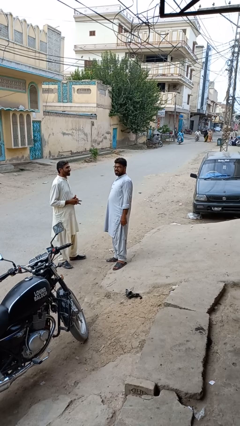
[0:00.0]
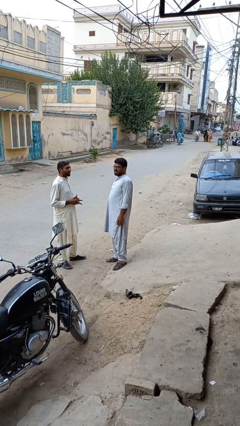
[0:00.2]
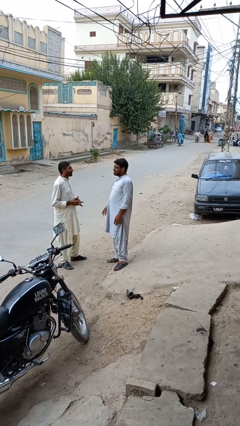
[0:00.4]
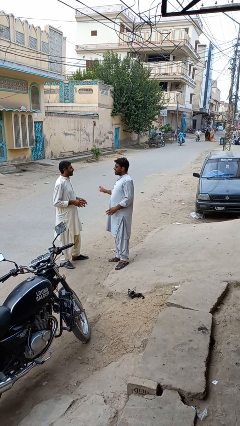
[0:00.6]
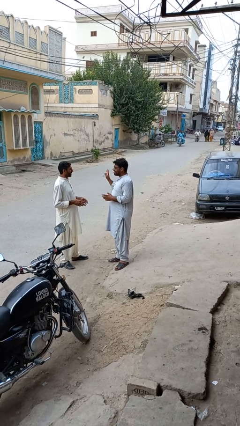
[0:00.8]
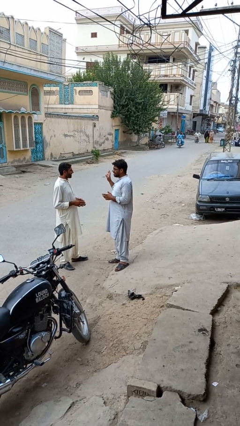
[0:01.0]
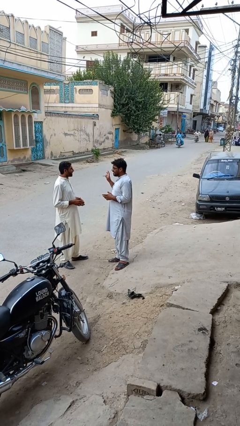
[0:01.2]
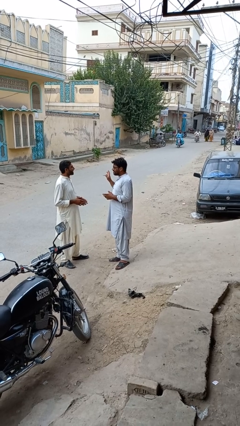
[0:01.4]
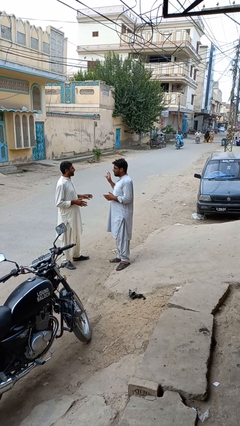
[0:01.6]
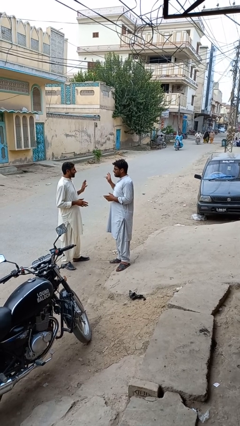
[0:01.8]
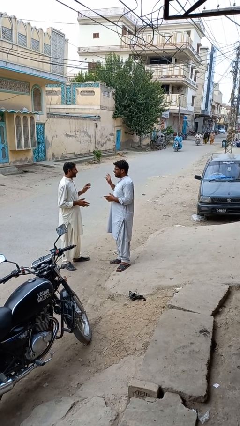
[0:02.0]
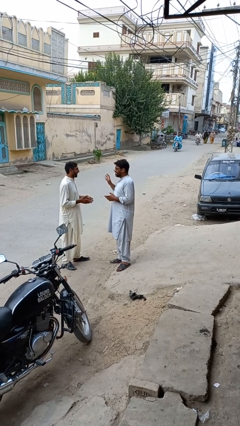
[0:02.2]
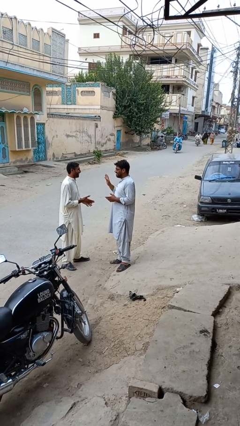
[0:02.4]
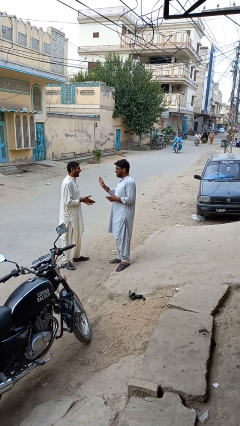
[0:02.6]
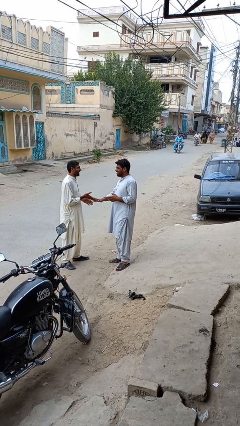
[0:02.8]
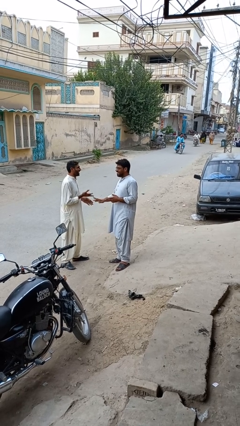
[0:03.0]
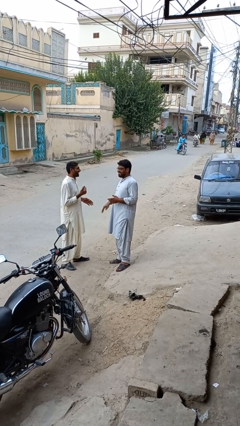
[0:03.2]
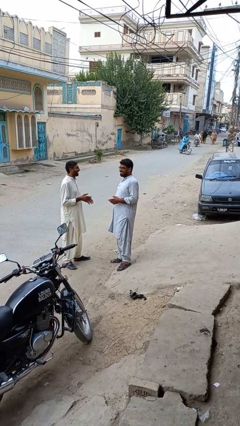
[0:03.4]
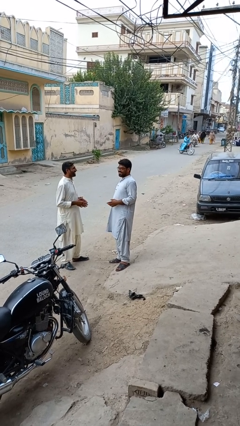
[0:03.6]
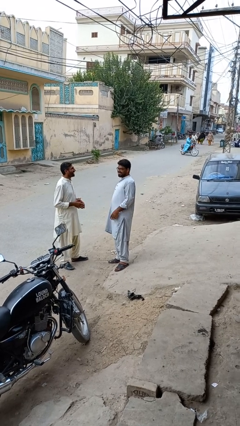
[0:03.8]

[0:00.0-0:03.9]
person talks to person

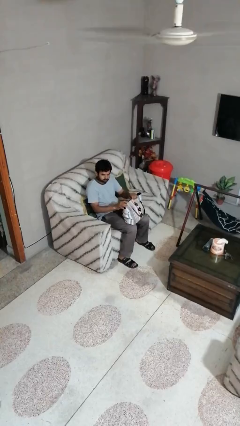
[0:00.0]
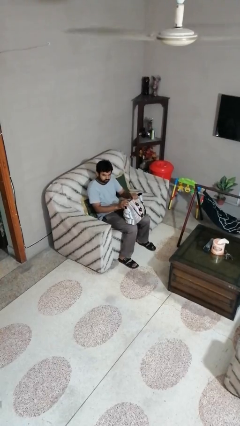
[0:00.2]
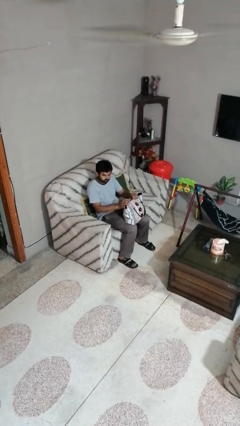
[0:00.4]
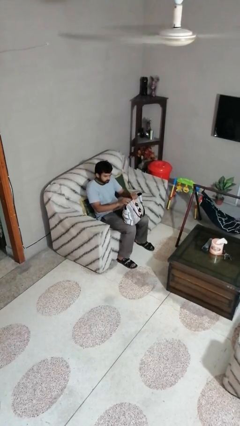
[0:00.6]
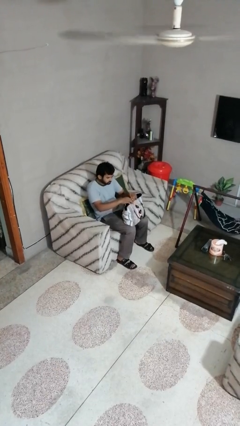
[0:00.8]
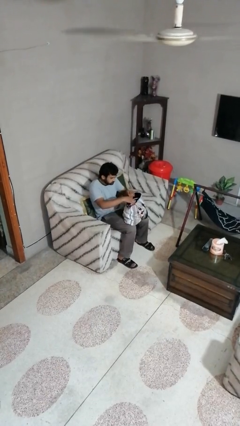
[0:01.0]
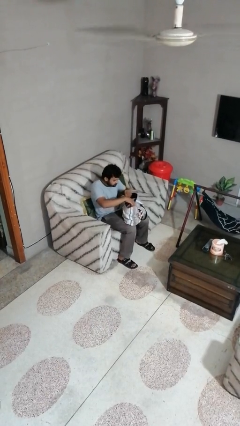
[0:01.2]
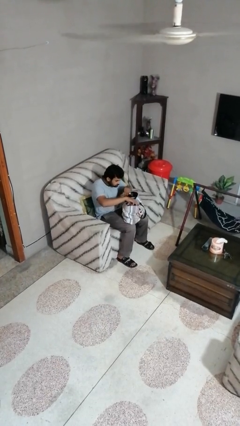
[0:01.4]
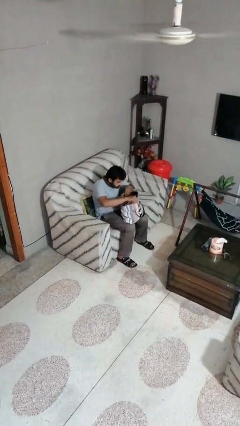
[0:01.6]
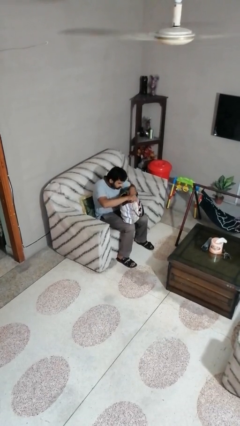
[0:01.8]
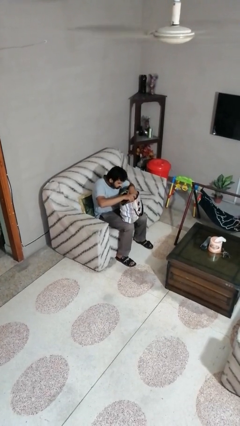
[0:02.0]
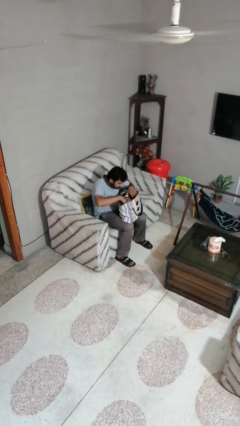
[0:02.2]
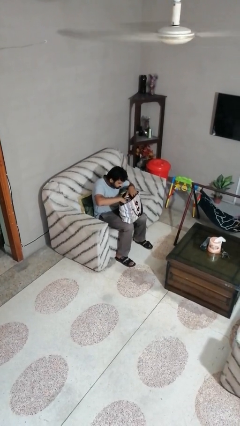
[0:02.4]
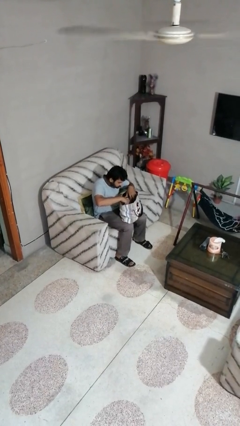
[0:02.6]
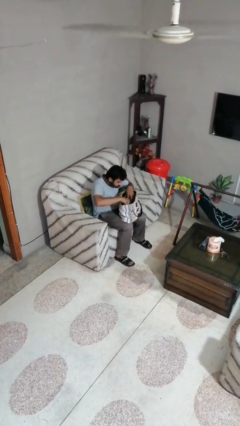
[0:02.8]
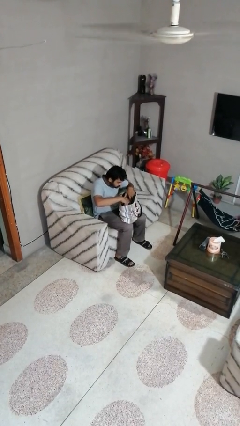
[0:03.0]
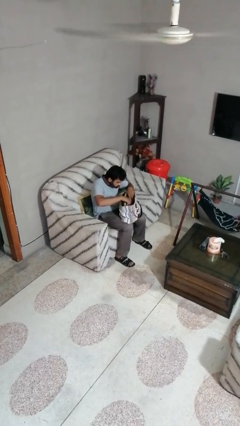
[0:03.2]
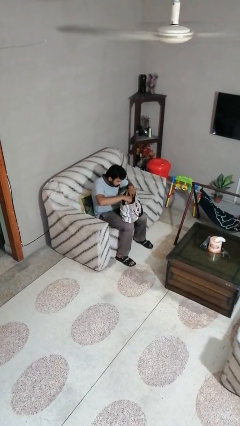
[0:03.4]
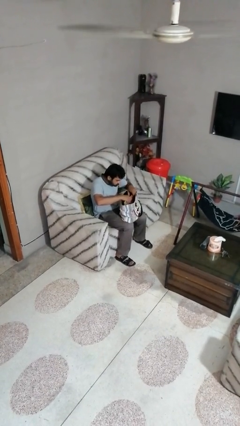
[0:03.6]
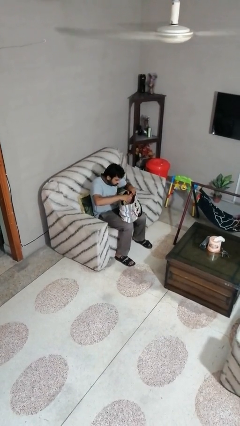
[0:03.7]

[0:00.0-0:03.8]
person searches in backpack

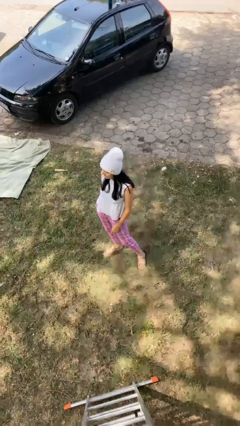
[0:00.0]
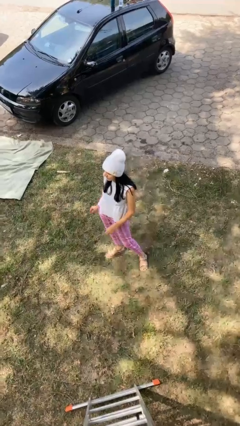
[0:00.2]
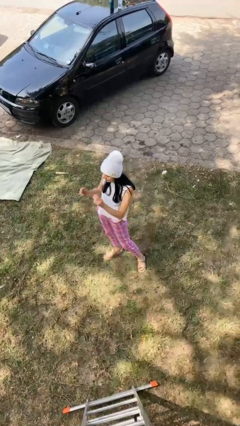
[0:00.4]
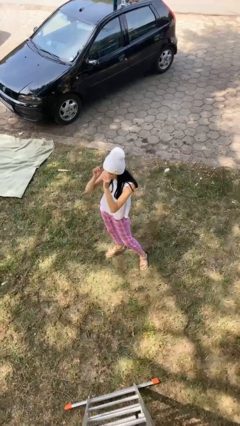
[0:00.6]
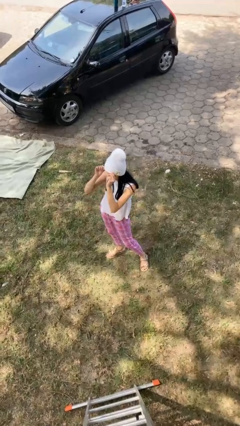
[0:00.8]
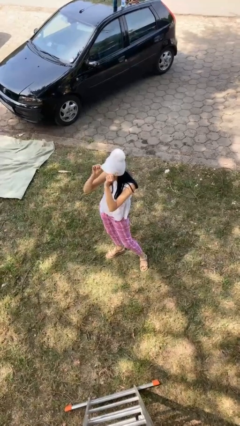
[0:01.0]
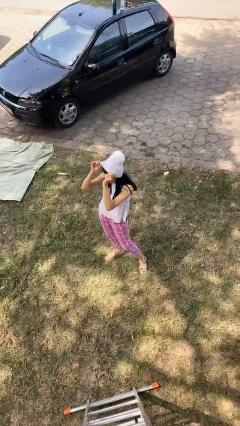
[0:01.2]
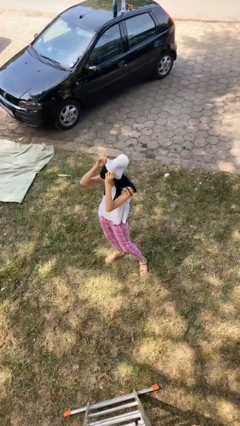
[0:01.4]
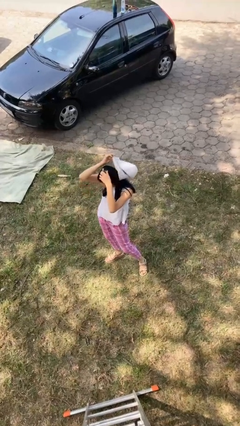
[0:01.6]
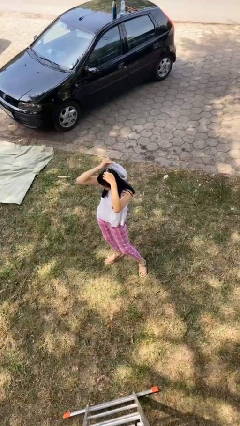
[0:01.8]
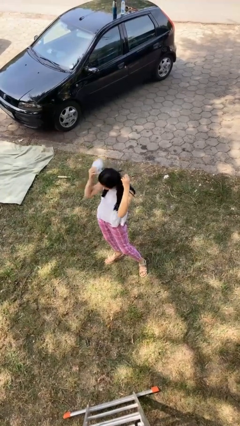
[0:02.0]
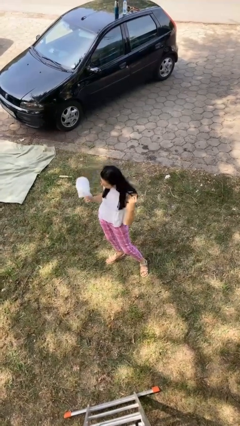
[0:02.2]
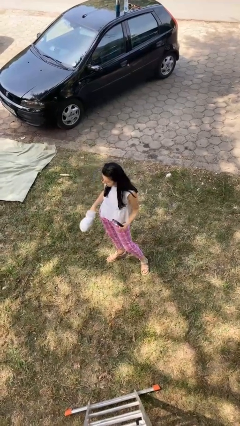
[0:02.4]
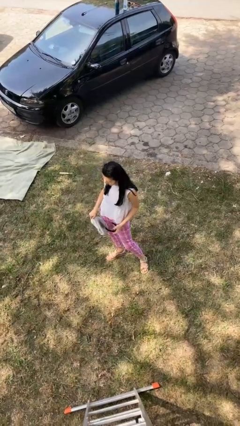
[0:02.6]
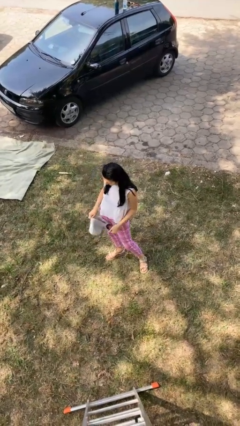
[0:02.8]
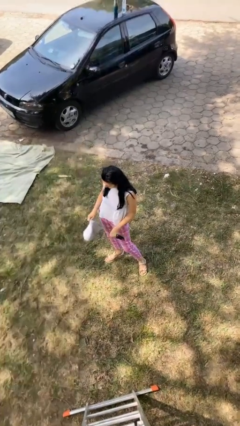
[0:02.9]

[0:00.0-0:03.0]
person takes off hat

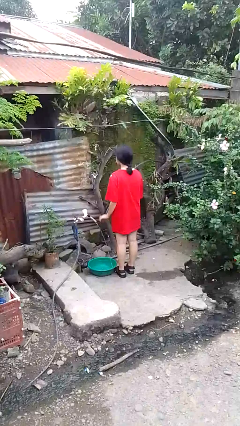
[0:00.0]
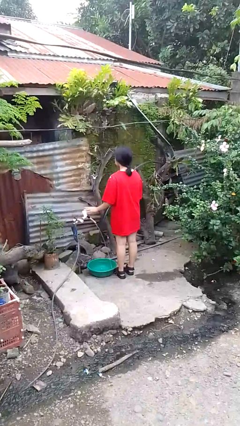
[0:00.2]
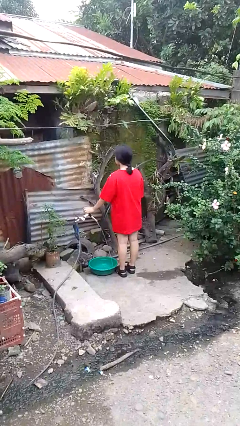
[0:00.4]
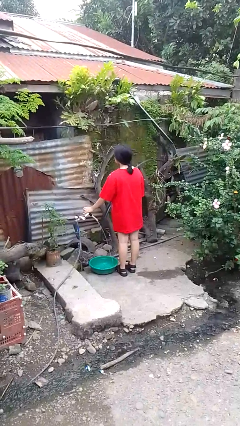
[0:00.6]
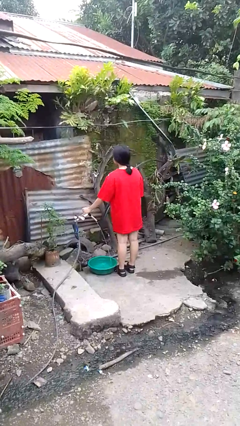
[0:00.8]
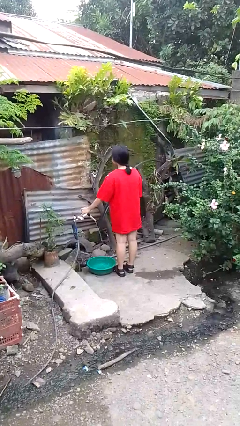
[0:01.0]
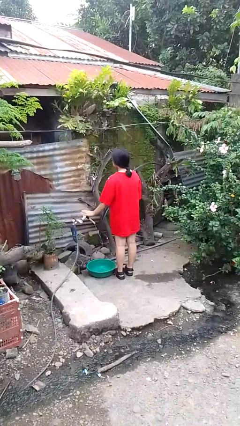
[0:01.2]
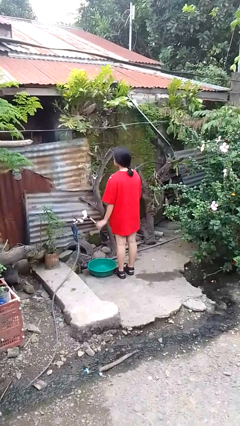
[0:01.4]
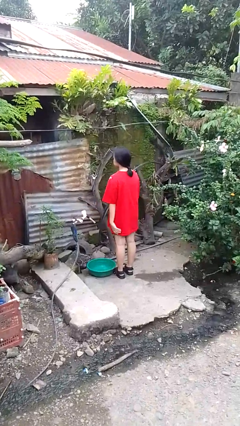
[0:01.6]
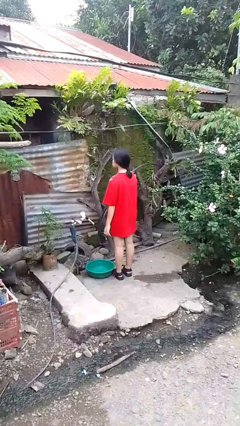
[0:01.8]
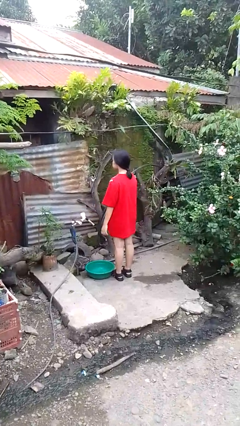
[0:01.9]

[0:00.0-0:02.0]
person turns off faucet

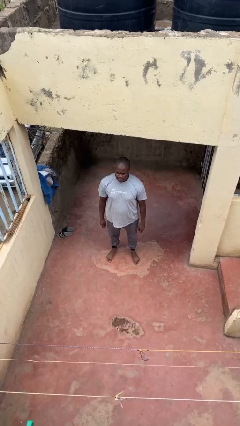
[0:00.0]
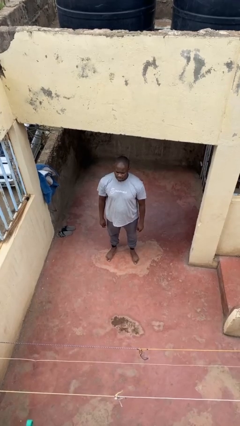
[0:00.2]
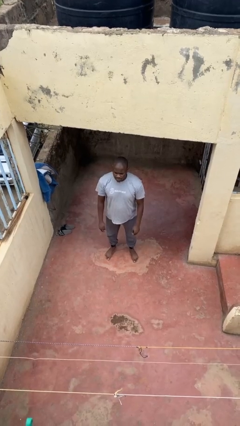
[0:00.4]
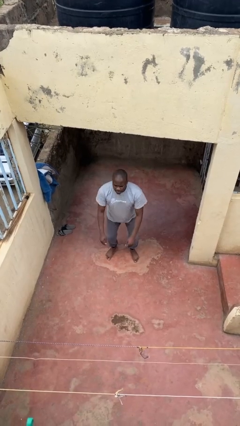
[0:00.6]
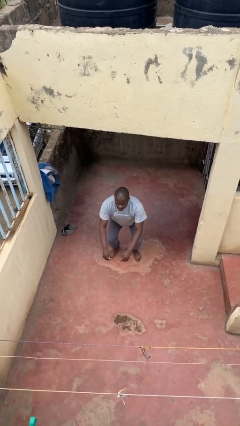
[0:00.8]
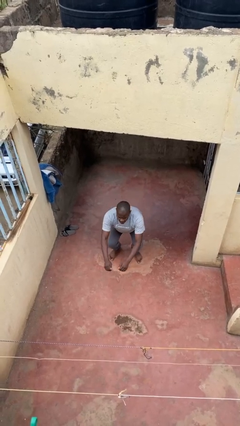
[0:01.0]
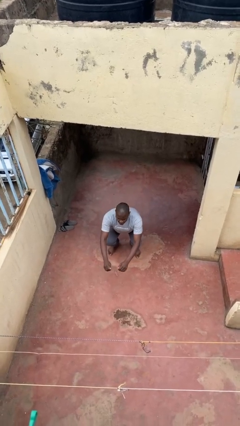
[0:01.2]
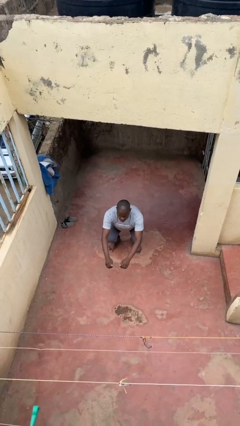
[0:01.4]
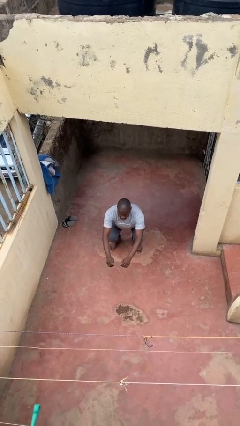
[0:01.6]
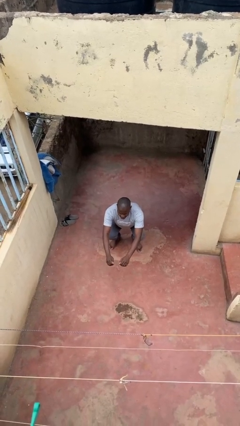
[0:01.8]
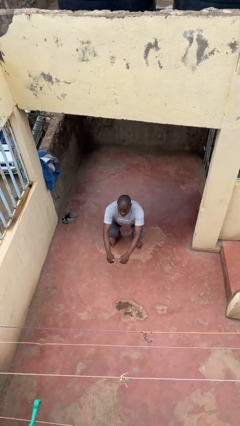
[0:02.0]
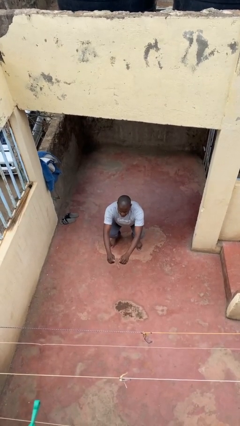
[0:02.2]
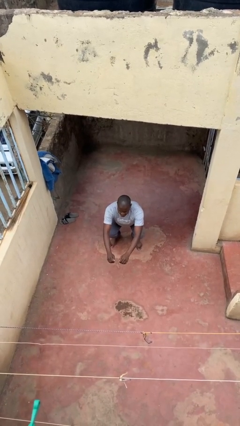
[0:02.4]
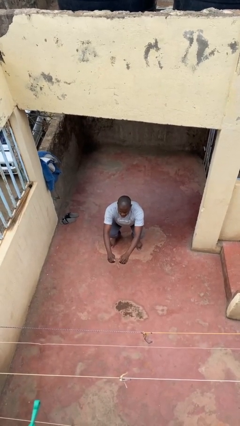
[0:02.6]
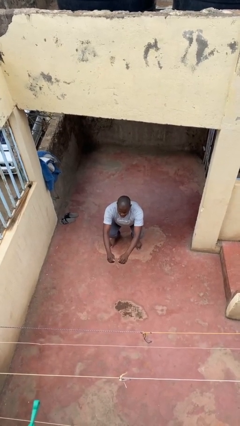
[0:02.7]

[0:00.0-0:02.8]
person squats

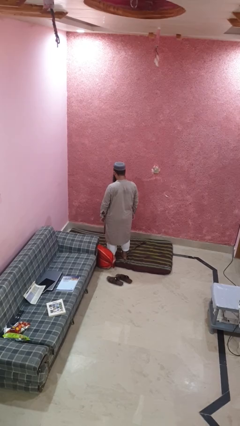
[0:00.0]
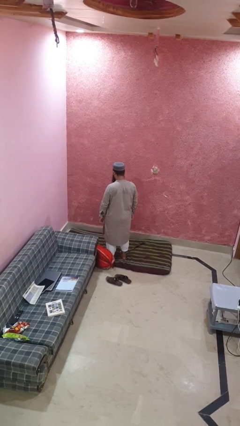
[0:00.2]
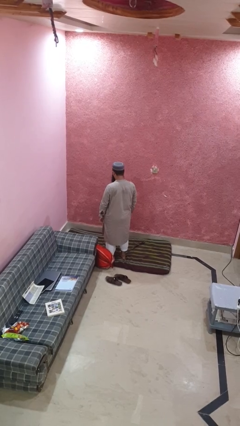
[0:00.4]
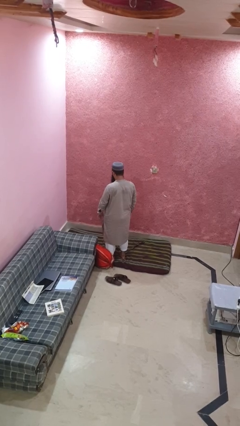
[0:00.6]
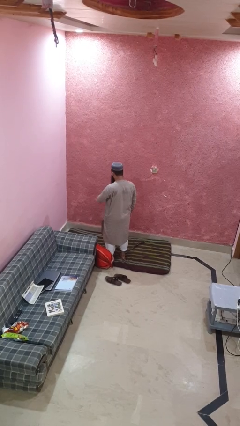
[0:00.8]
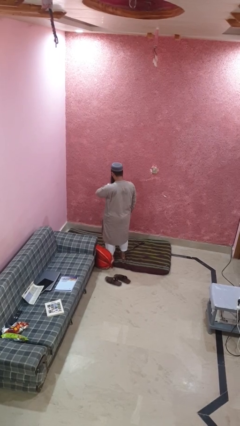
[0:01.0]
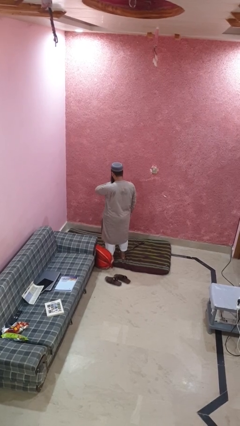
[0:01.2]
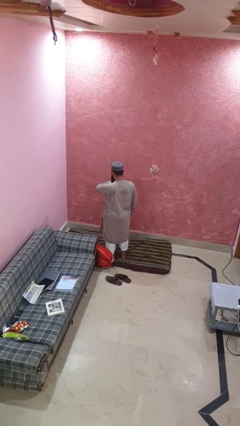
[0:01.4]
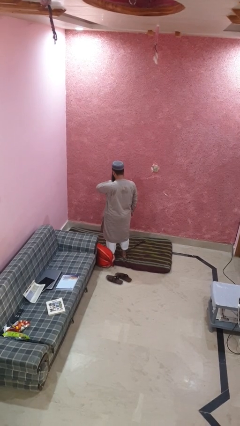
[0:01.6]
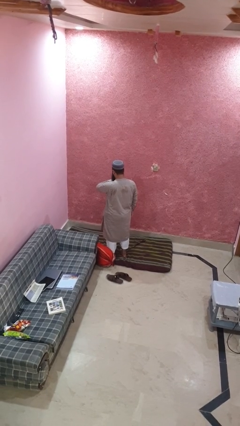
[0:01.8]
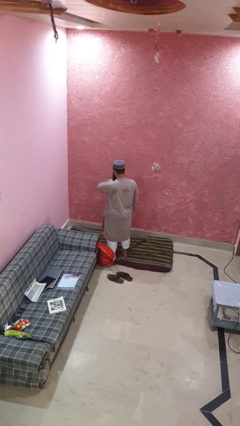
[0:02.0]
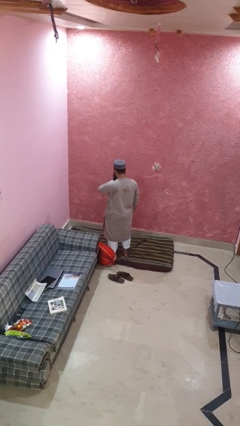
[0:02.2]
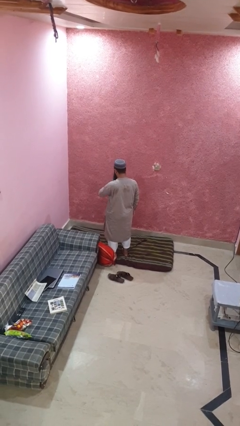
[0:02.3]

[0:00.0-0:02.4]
person looks at wristwatch
